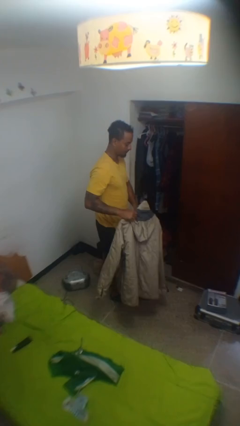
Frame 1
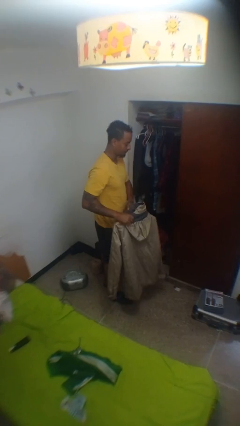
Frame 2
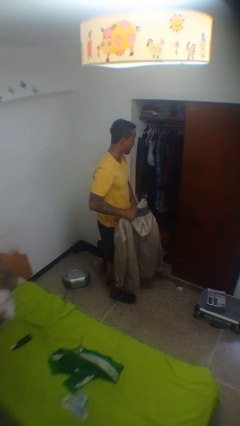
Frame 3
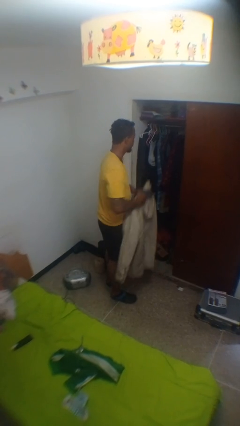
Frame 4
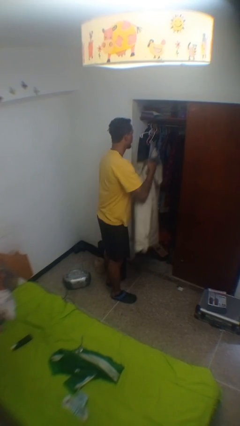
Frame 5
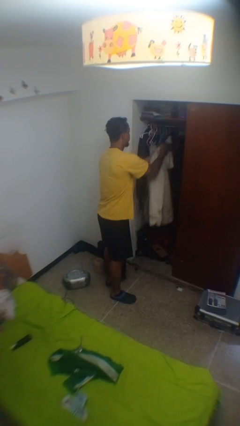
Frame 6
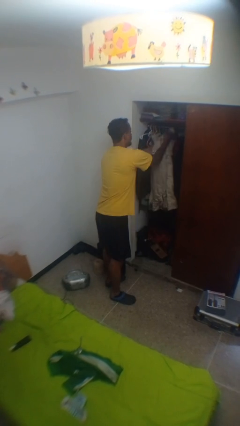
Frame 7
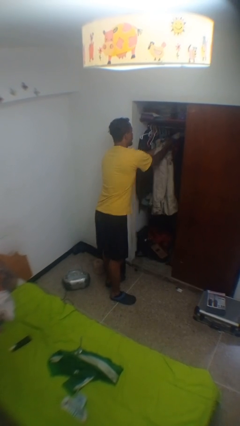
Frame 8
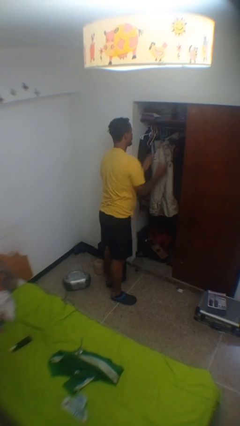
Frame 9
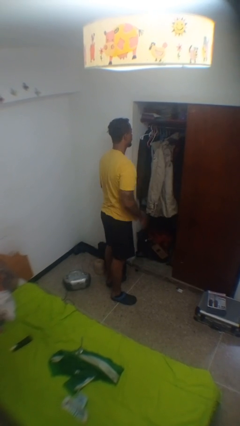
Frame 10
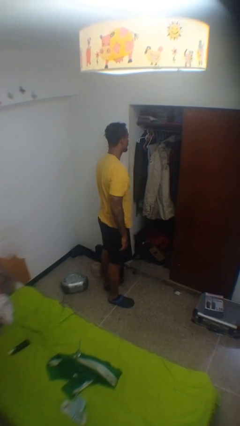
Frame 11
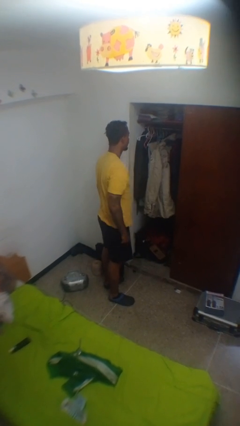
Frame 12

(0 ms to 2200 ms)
person puts clothes into closet

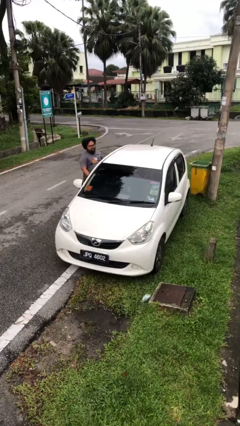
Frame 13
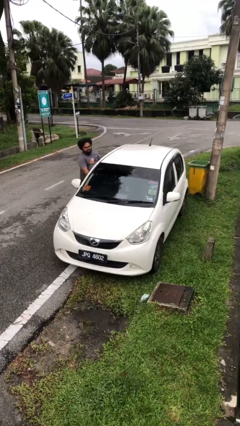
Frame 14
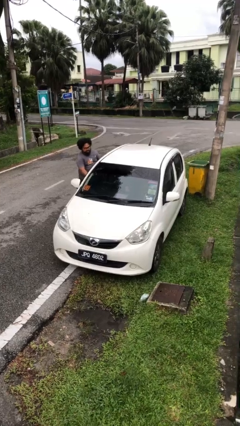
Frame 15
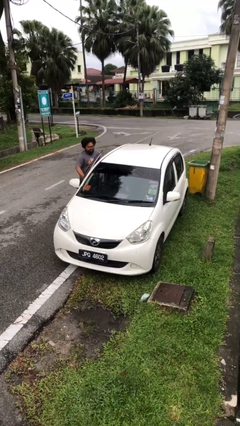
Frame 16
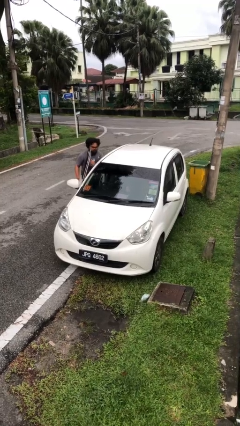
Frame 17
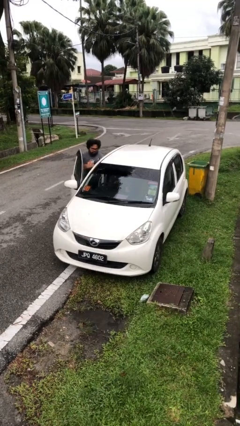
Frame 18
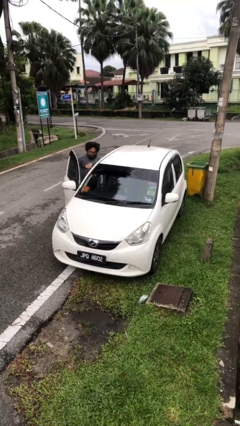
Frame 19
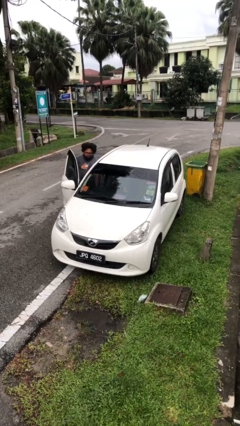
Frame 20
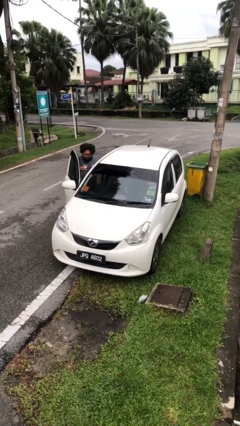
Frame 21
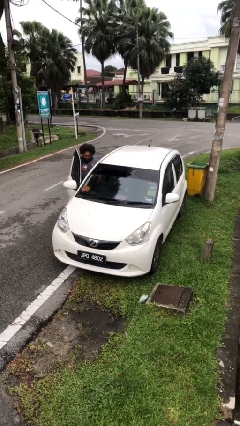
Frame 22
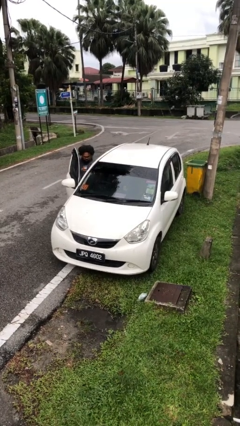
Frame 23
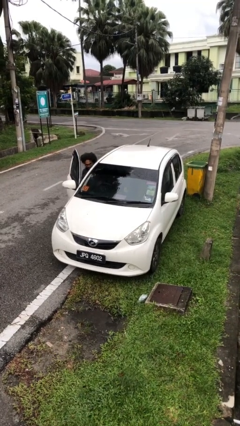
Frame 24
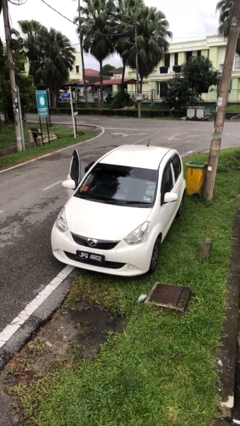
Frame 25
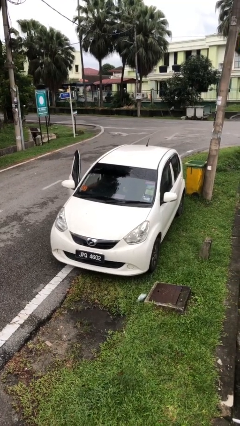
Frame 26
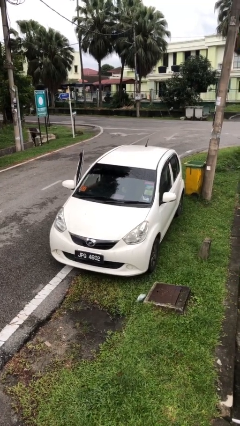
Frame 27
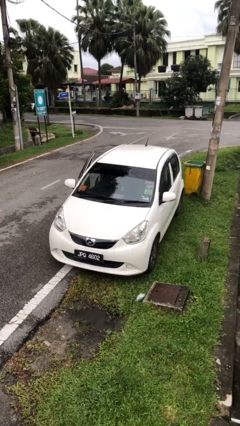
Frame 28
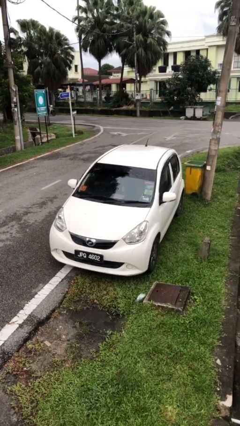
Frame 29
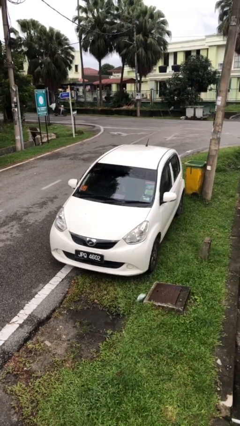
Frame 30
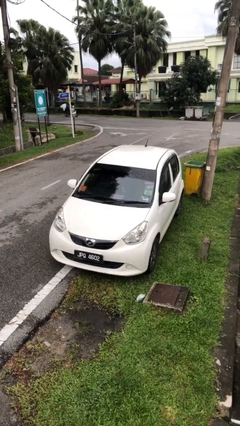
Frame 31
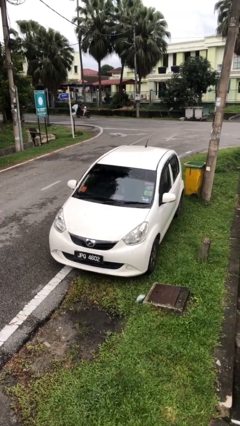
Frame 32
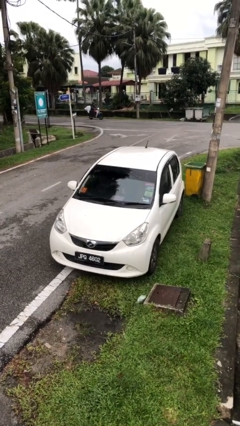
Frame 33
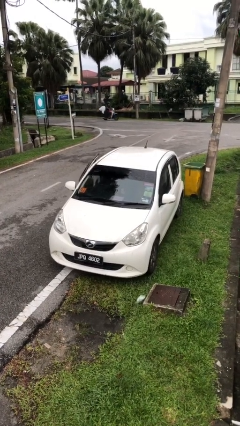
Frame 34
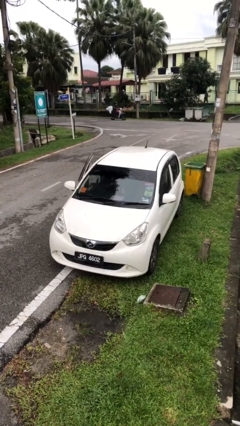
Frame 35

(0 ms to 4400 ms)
car picks up person

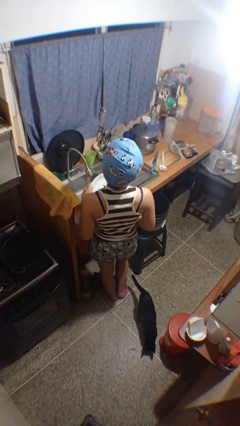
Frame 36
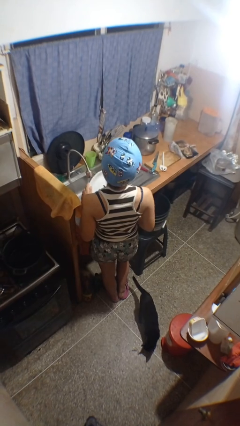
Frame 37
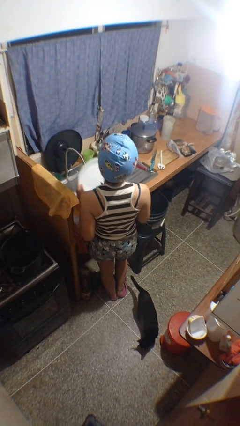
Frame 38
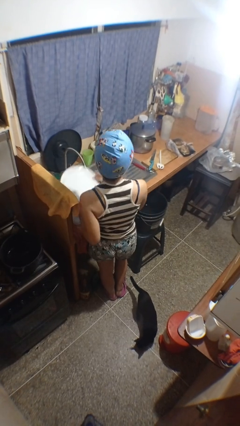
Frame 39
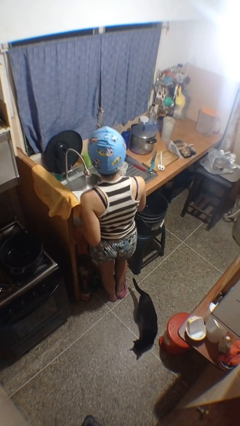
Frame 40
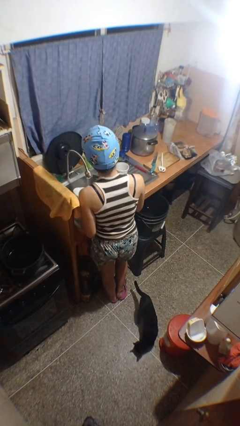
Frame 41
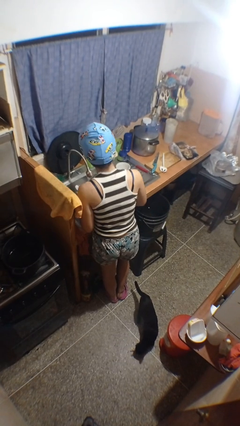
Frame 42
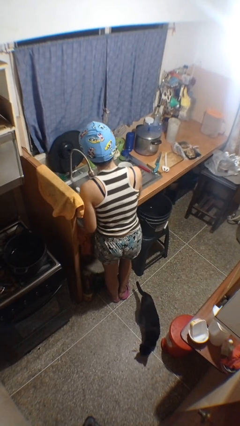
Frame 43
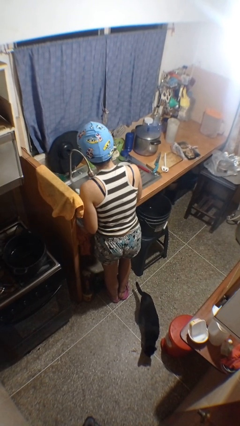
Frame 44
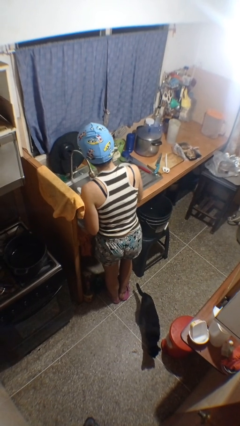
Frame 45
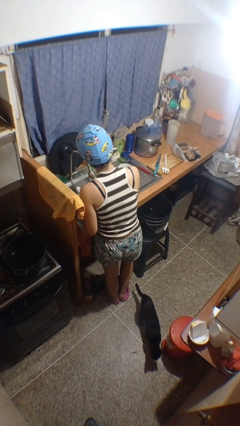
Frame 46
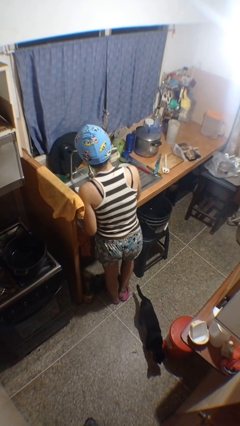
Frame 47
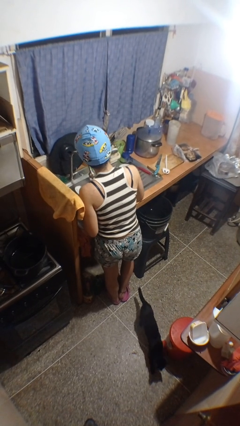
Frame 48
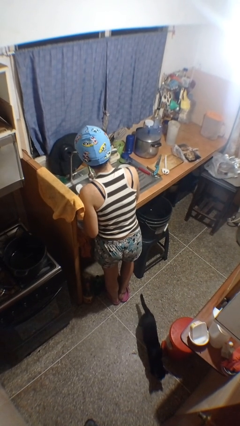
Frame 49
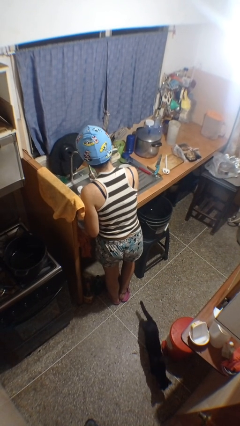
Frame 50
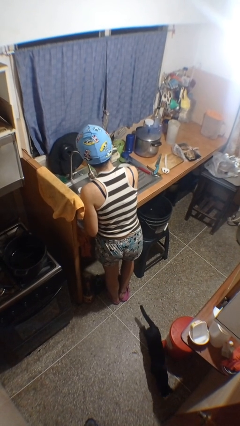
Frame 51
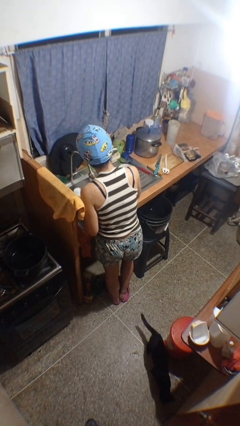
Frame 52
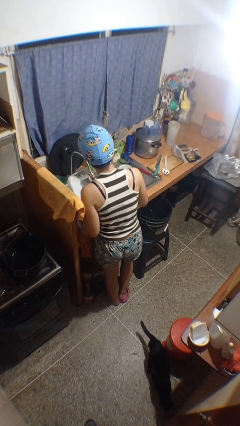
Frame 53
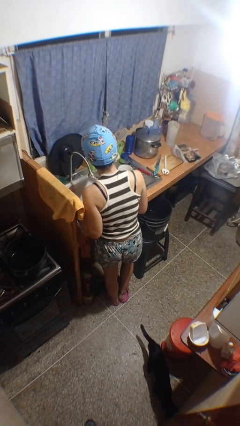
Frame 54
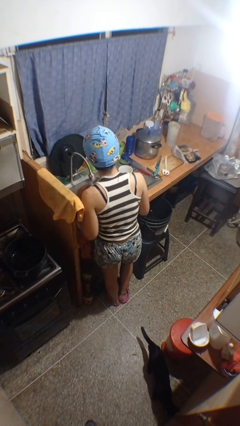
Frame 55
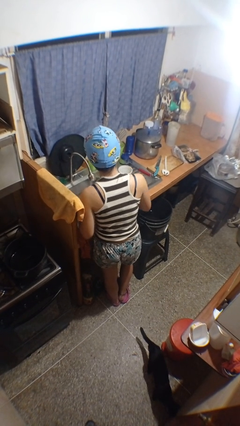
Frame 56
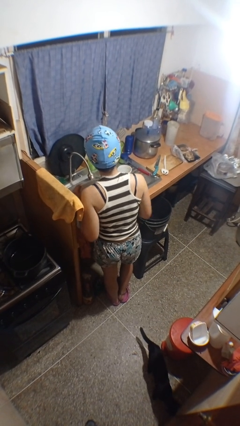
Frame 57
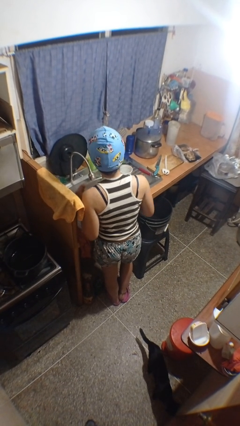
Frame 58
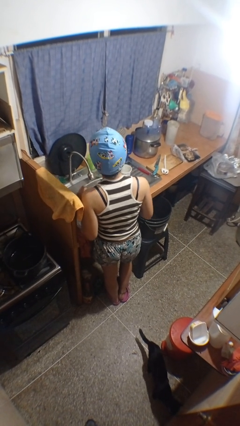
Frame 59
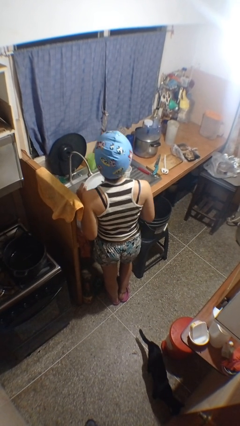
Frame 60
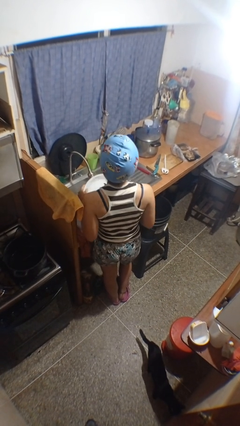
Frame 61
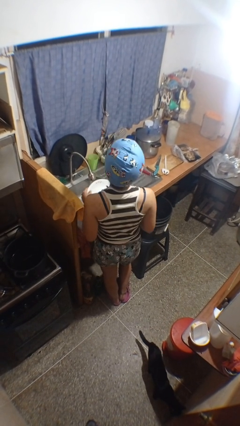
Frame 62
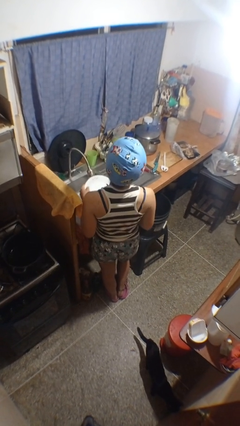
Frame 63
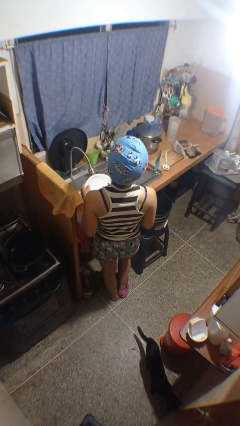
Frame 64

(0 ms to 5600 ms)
person washes dish

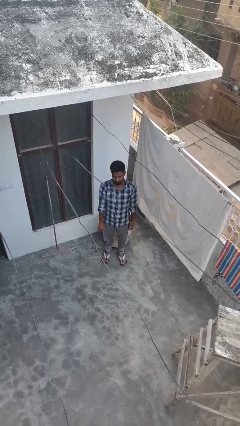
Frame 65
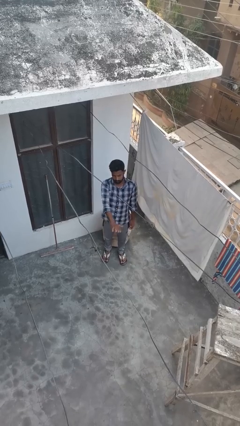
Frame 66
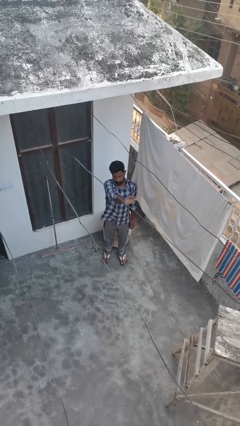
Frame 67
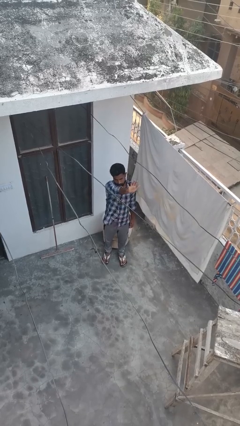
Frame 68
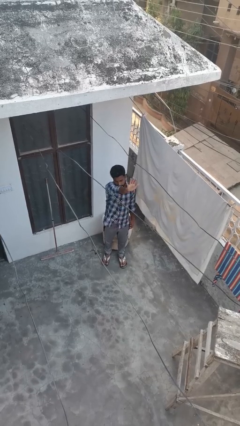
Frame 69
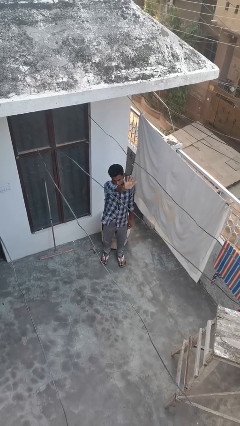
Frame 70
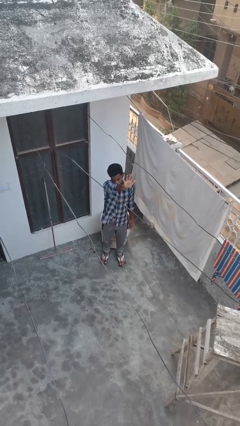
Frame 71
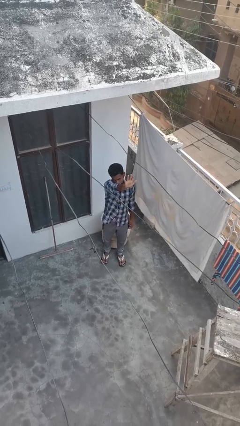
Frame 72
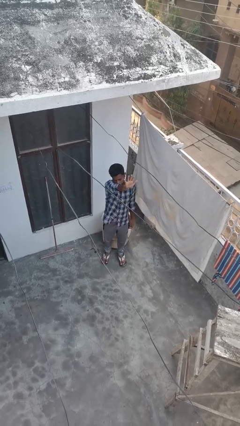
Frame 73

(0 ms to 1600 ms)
person gestures number five

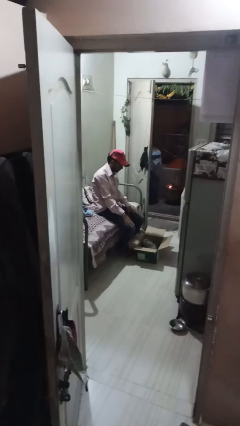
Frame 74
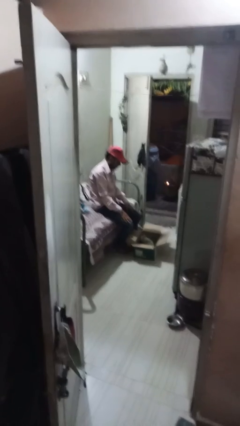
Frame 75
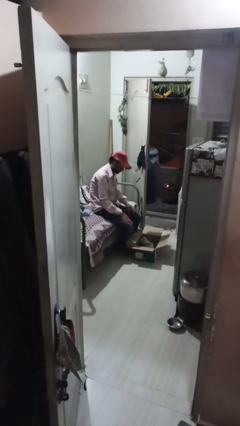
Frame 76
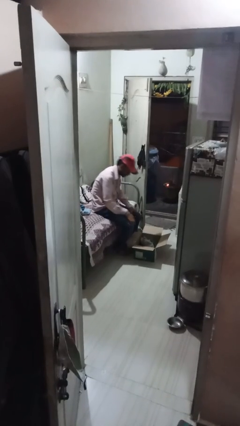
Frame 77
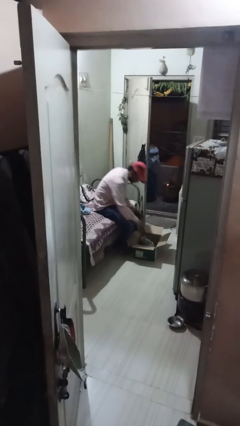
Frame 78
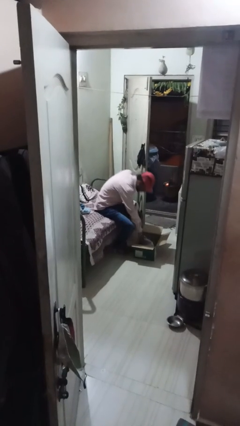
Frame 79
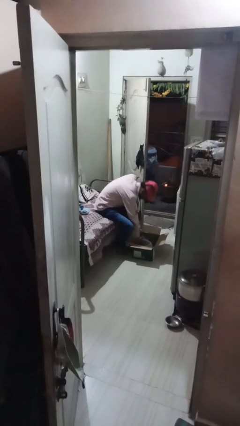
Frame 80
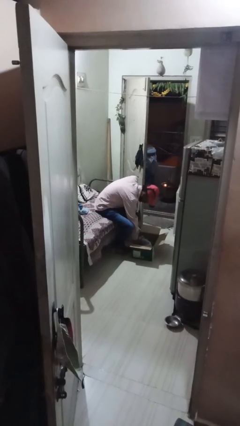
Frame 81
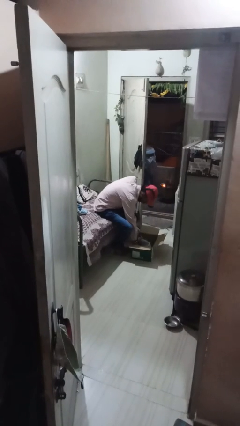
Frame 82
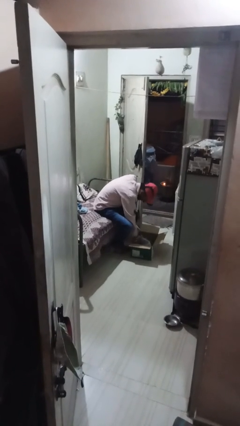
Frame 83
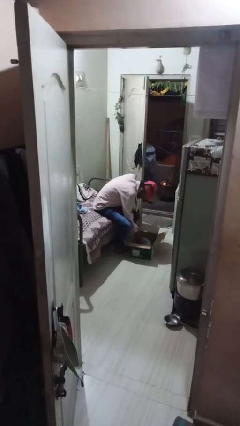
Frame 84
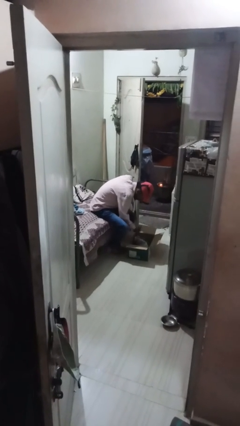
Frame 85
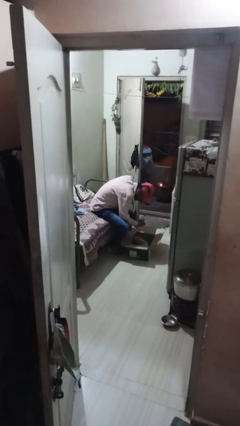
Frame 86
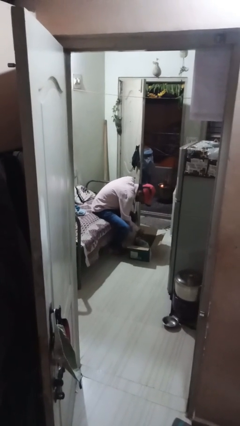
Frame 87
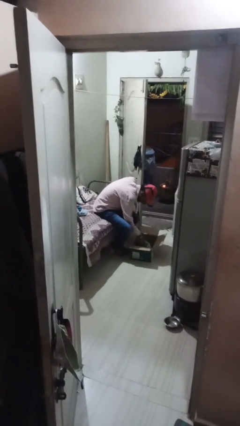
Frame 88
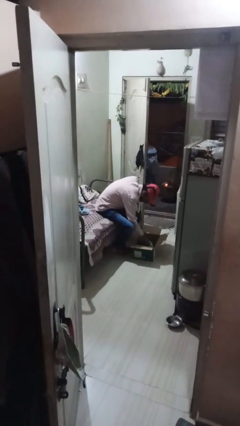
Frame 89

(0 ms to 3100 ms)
person searches in box

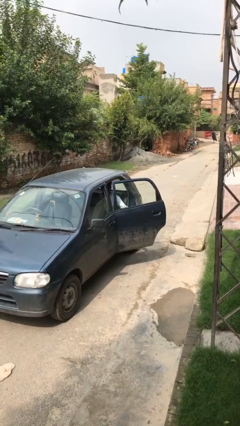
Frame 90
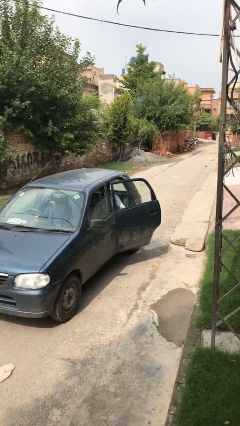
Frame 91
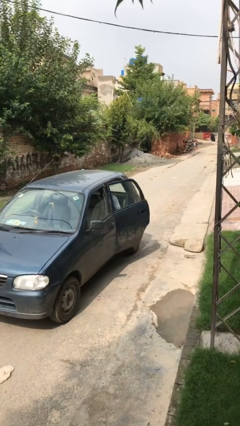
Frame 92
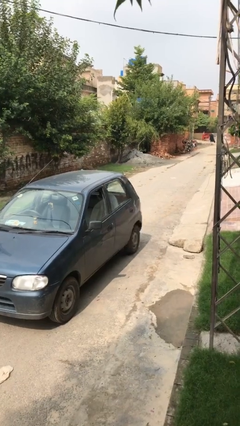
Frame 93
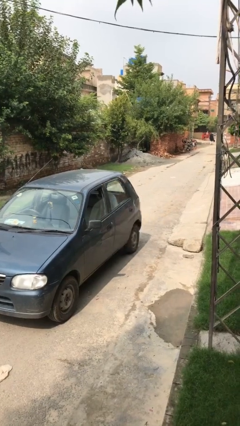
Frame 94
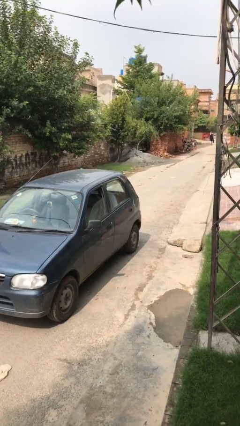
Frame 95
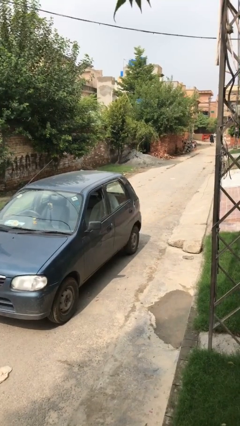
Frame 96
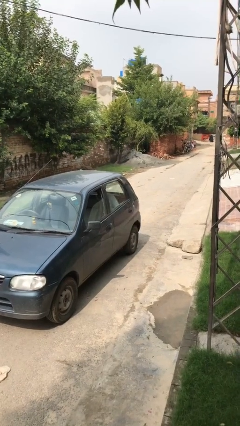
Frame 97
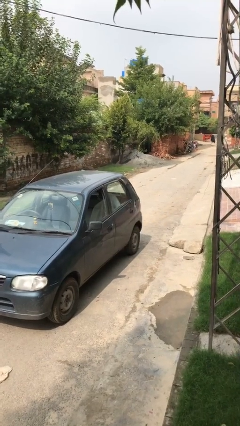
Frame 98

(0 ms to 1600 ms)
person closes car door
